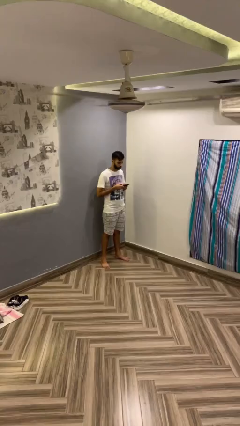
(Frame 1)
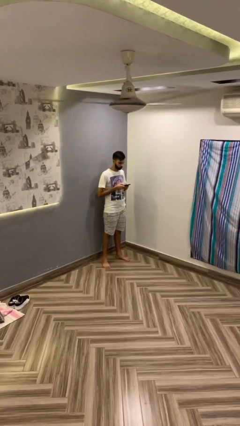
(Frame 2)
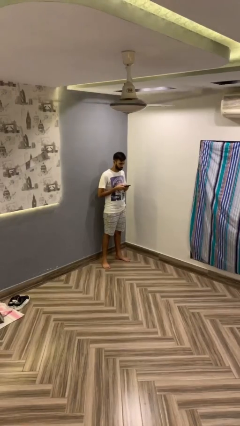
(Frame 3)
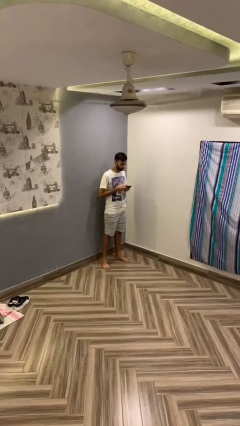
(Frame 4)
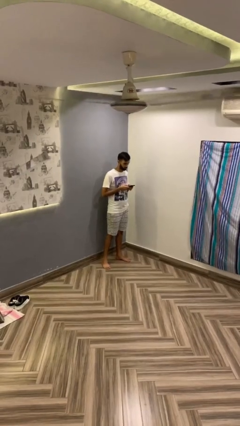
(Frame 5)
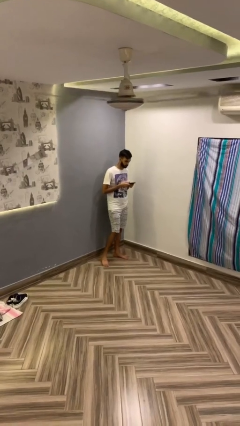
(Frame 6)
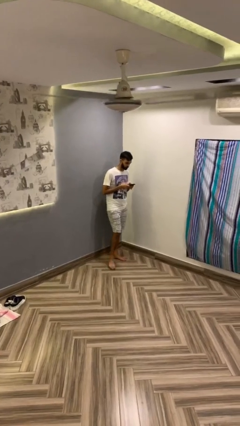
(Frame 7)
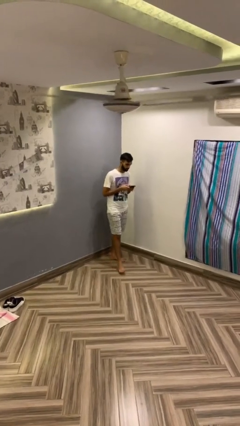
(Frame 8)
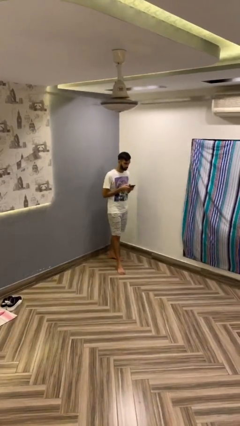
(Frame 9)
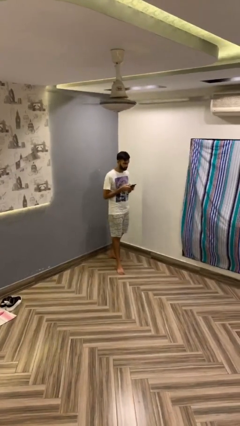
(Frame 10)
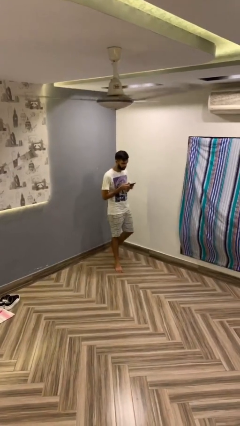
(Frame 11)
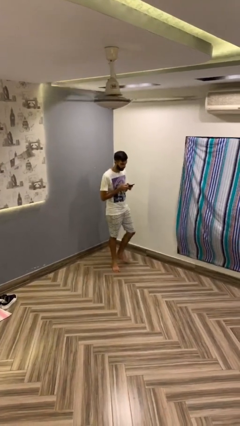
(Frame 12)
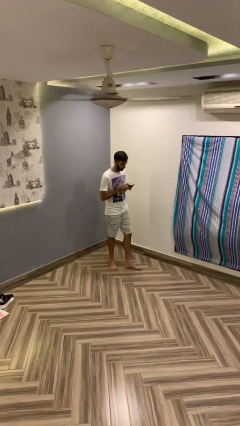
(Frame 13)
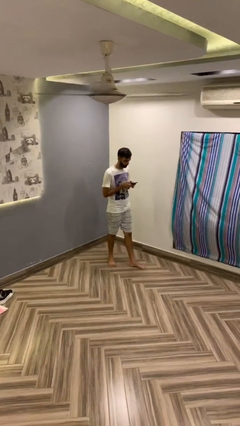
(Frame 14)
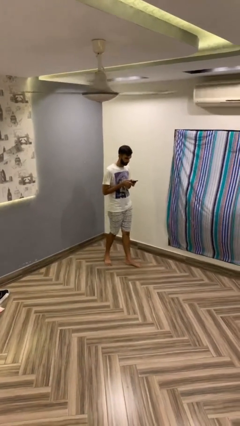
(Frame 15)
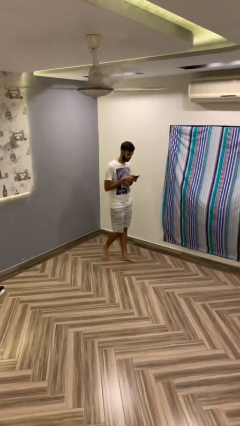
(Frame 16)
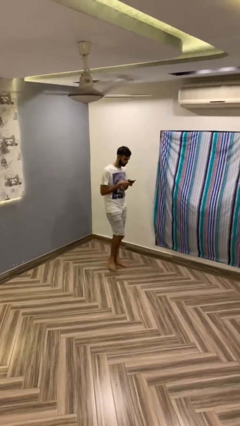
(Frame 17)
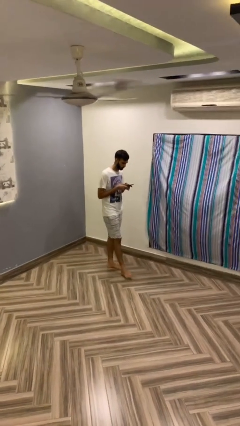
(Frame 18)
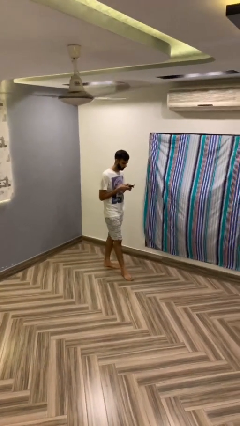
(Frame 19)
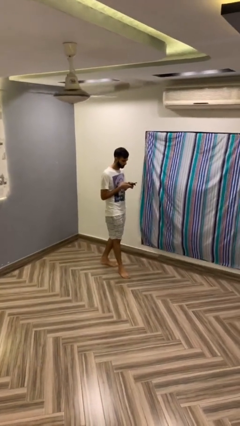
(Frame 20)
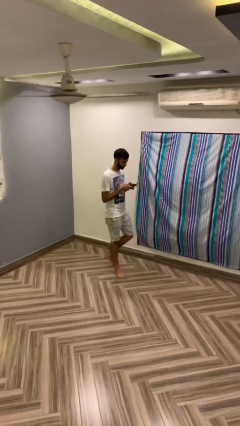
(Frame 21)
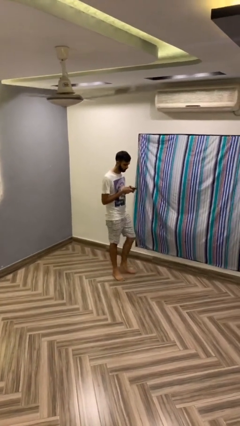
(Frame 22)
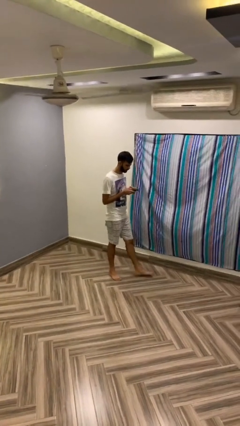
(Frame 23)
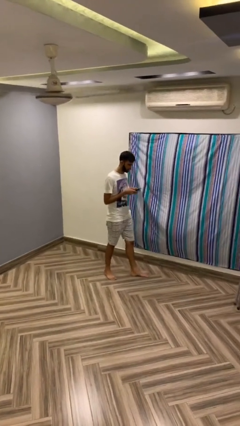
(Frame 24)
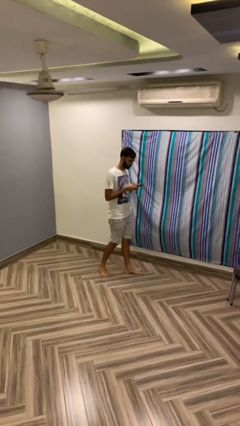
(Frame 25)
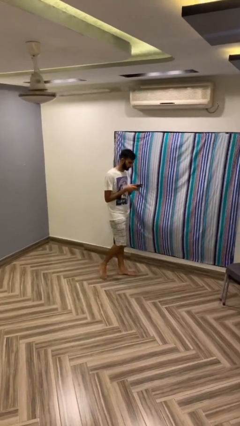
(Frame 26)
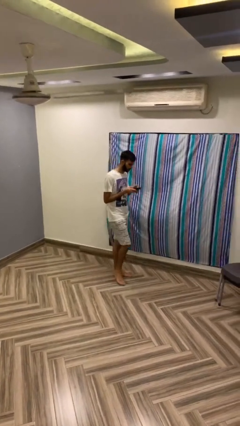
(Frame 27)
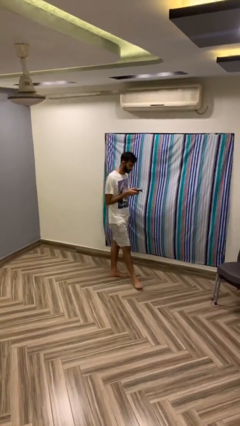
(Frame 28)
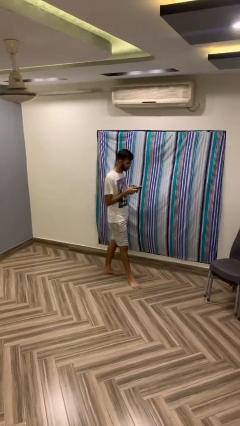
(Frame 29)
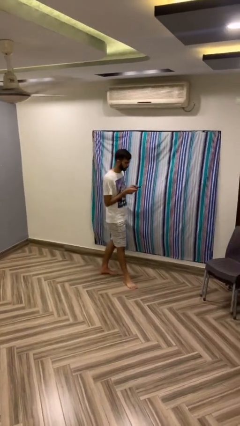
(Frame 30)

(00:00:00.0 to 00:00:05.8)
person texts on phone

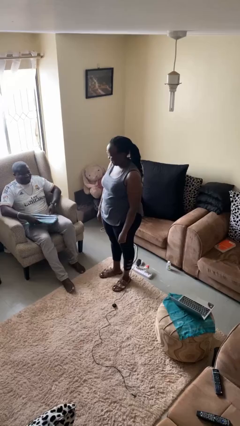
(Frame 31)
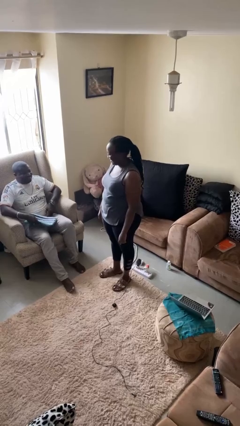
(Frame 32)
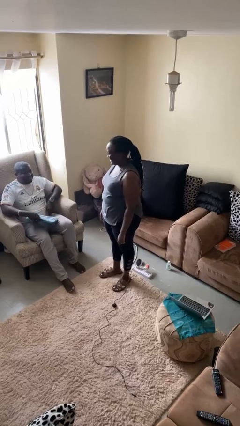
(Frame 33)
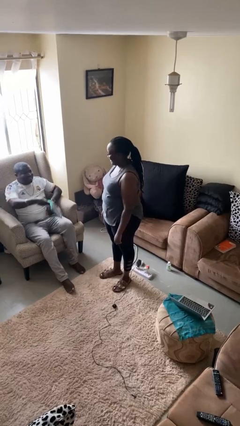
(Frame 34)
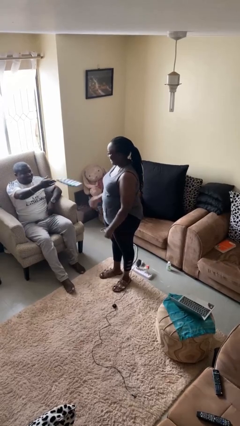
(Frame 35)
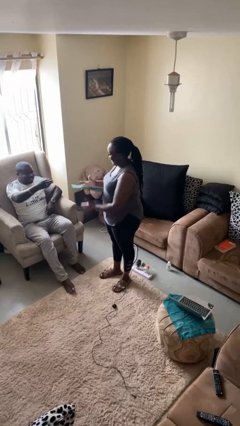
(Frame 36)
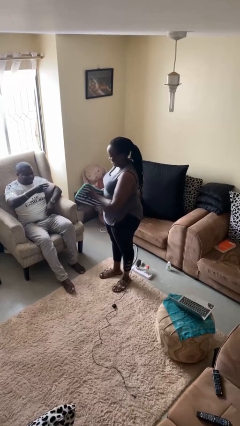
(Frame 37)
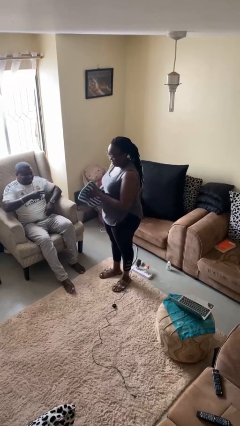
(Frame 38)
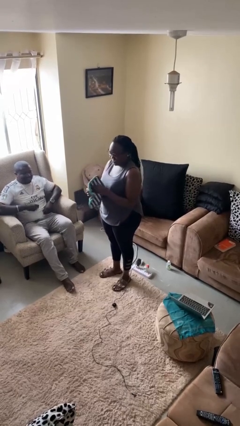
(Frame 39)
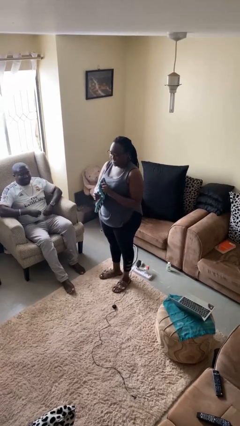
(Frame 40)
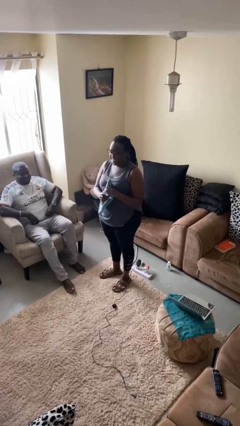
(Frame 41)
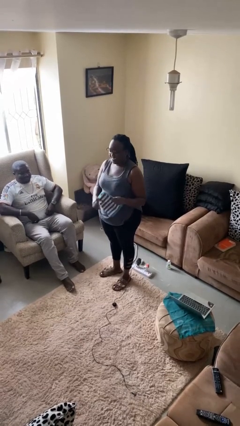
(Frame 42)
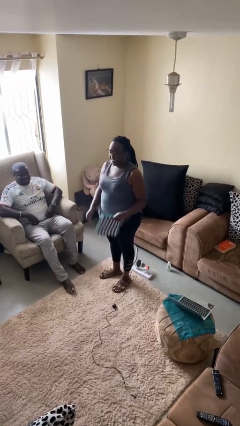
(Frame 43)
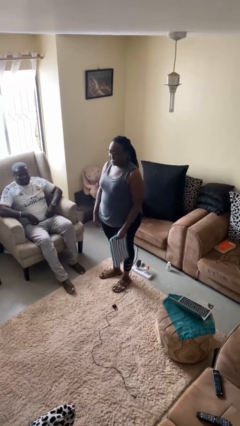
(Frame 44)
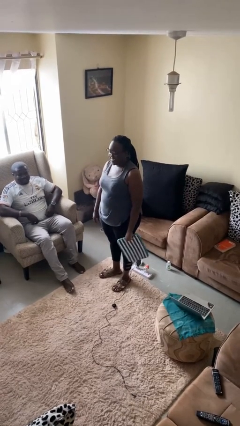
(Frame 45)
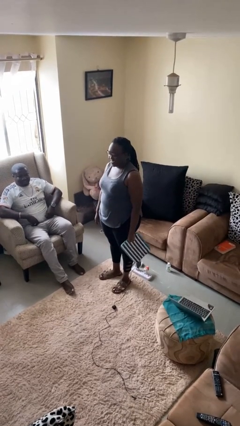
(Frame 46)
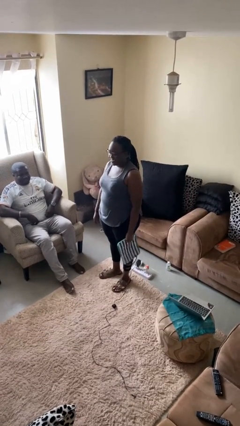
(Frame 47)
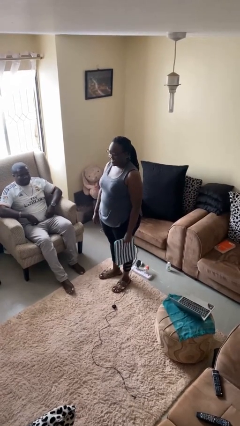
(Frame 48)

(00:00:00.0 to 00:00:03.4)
person catches object from person

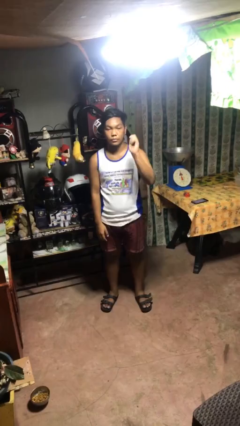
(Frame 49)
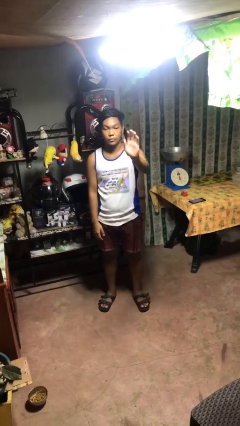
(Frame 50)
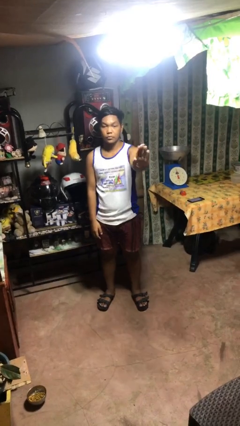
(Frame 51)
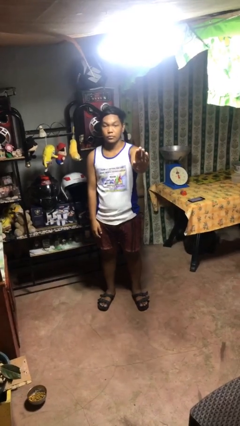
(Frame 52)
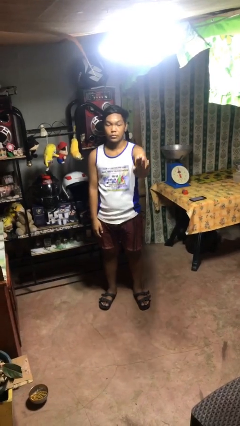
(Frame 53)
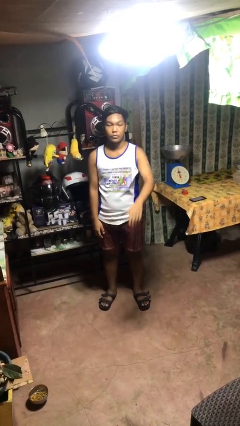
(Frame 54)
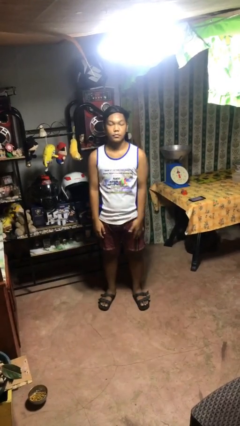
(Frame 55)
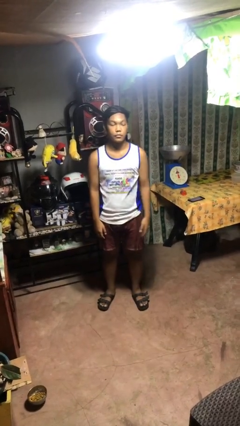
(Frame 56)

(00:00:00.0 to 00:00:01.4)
person gestures stop

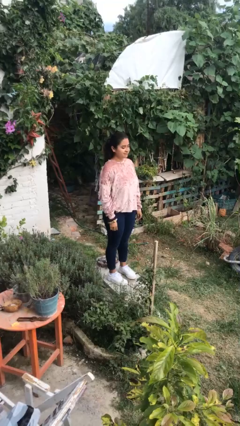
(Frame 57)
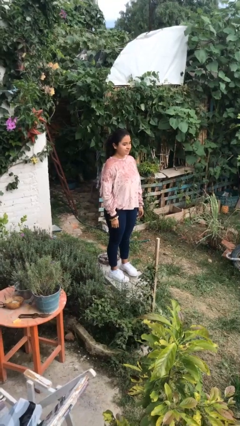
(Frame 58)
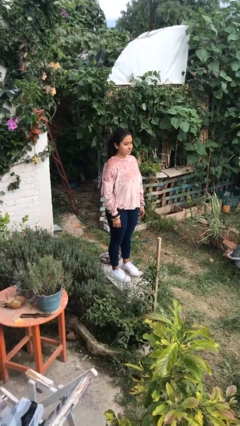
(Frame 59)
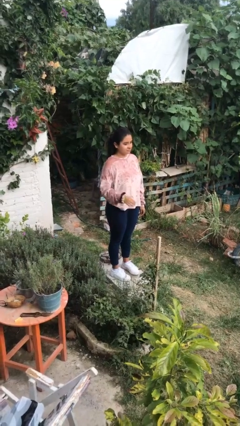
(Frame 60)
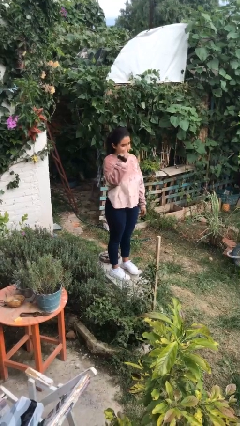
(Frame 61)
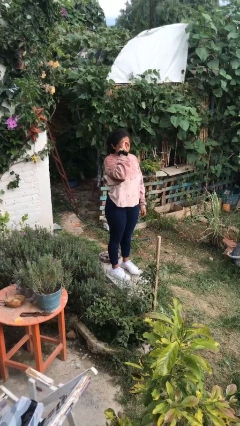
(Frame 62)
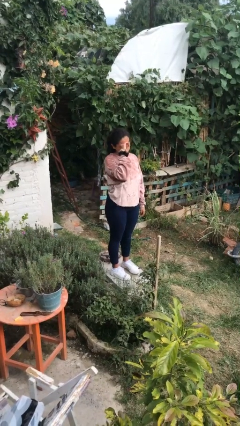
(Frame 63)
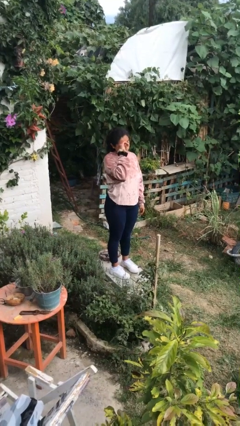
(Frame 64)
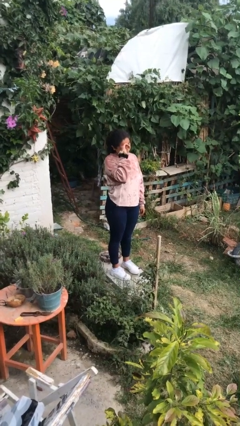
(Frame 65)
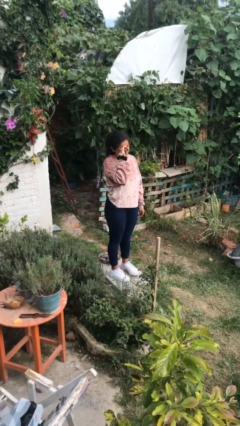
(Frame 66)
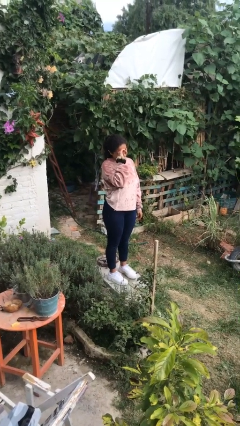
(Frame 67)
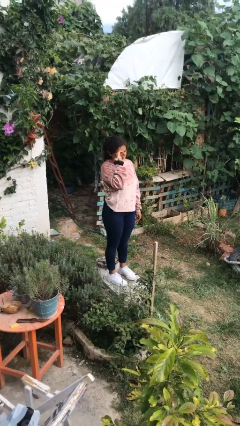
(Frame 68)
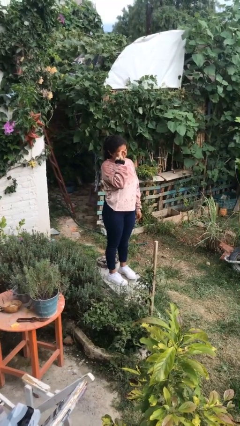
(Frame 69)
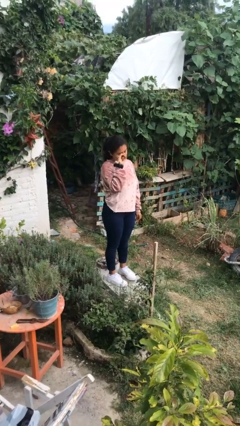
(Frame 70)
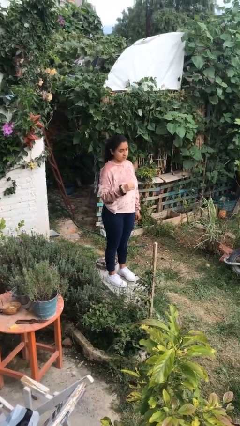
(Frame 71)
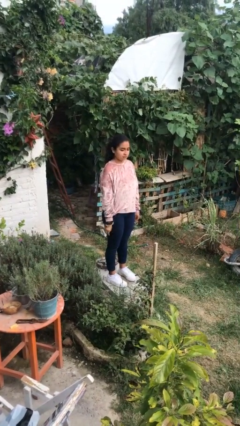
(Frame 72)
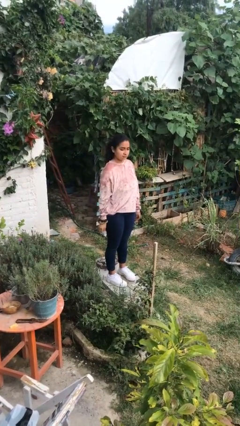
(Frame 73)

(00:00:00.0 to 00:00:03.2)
person rubs eyes

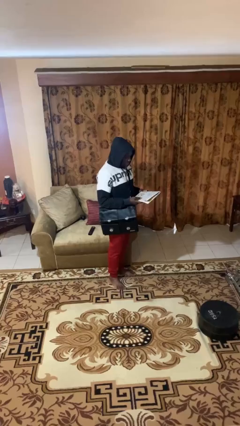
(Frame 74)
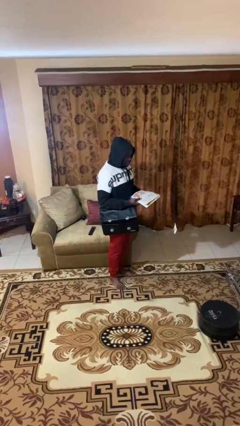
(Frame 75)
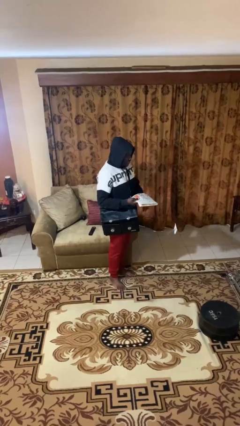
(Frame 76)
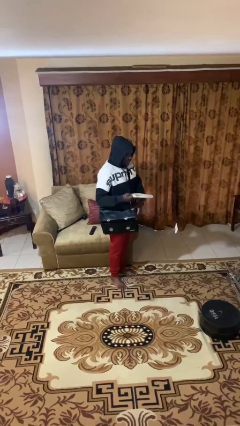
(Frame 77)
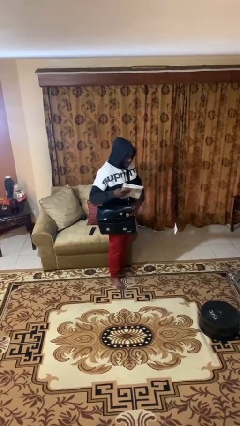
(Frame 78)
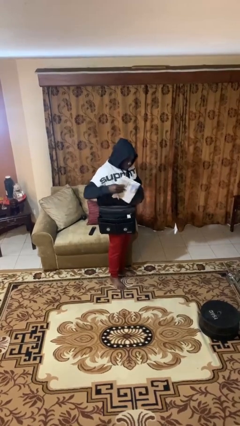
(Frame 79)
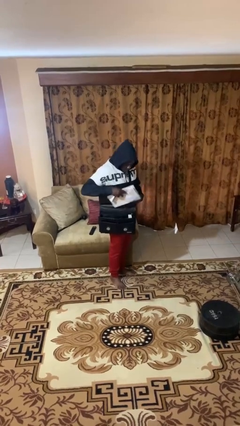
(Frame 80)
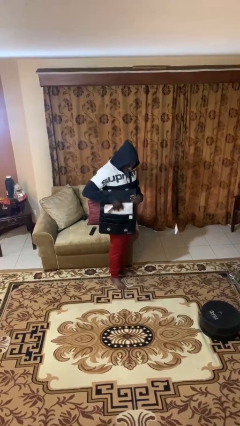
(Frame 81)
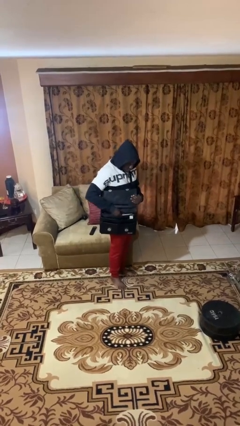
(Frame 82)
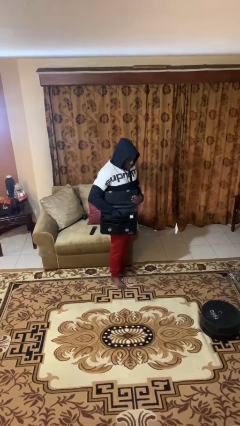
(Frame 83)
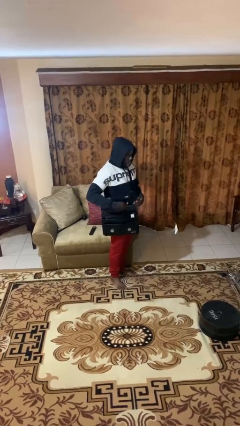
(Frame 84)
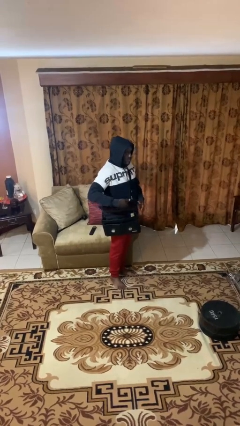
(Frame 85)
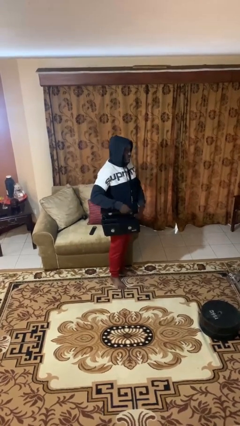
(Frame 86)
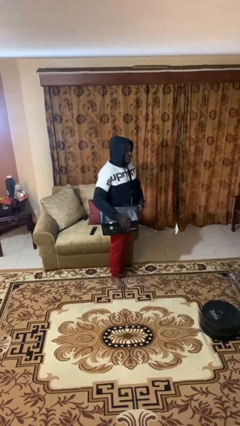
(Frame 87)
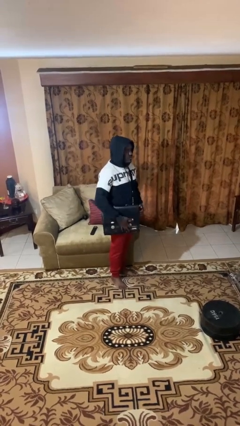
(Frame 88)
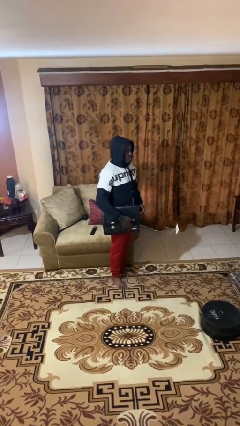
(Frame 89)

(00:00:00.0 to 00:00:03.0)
person puts object into purse

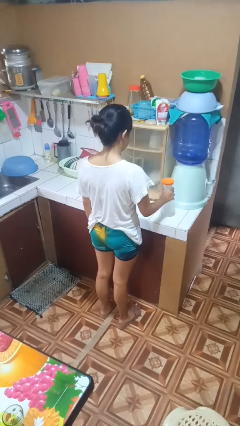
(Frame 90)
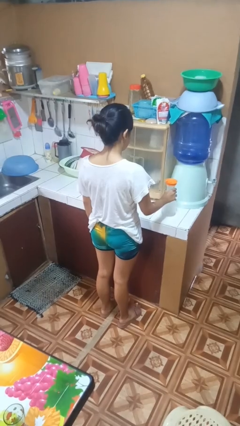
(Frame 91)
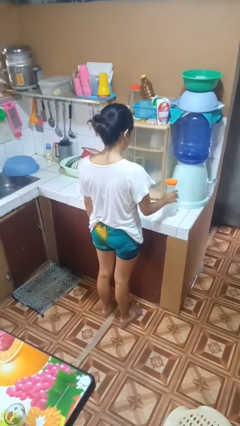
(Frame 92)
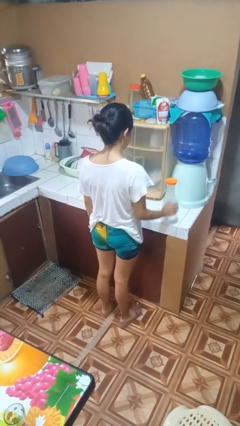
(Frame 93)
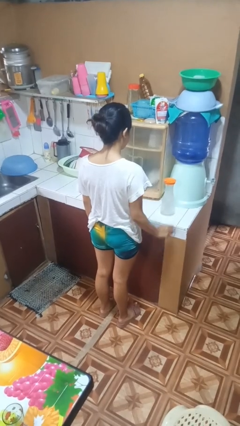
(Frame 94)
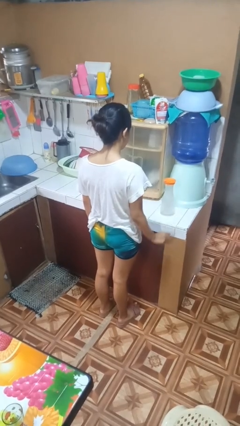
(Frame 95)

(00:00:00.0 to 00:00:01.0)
person puts down object on countertop
